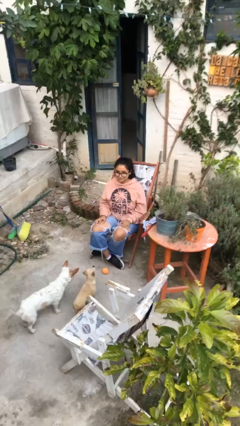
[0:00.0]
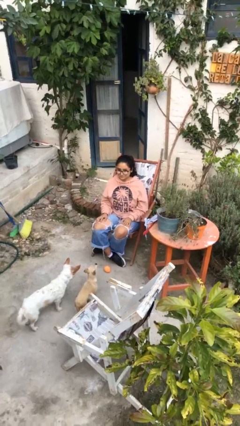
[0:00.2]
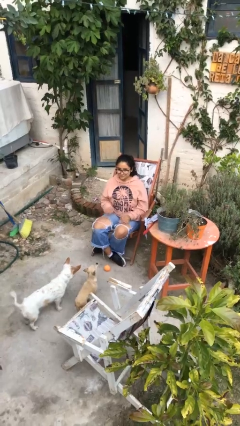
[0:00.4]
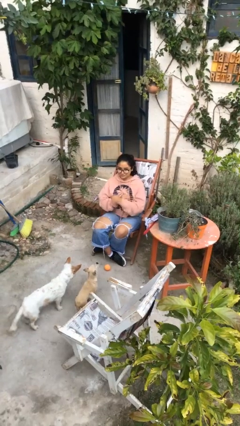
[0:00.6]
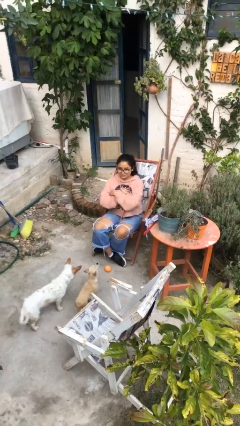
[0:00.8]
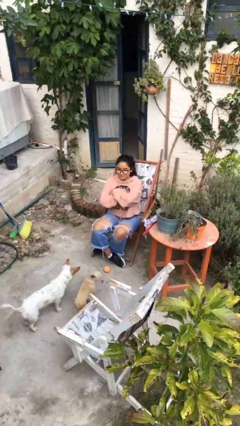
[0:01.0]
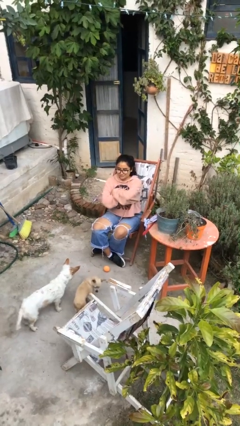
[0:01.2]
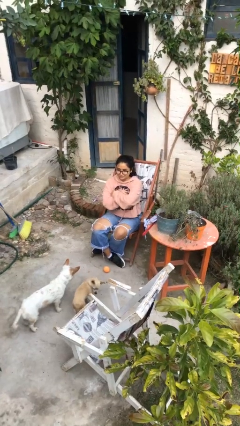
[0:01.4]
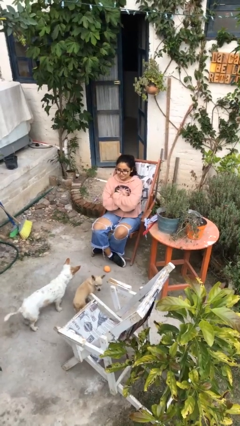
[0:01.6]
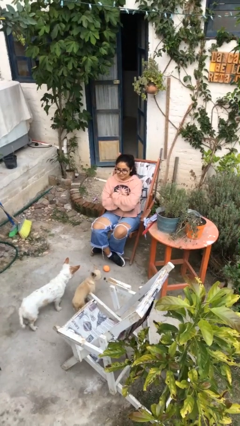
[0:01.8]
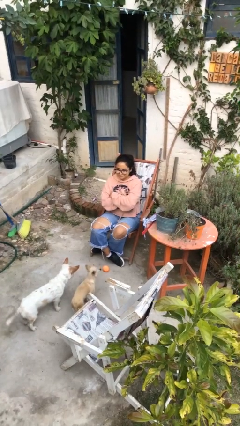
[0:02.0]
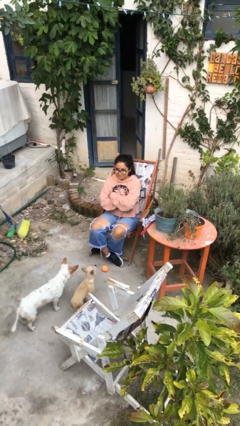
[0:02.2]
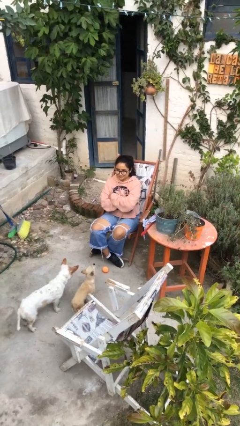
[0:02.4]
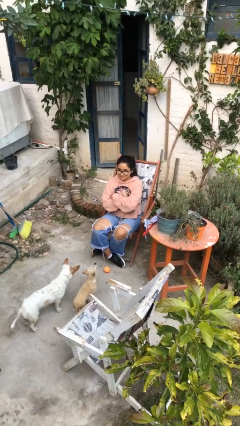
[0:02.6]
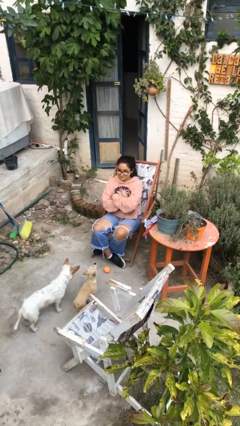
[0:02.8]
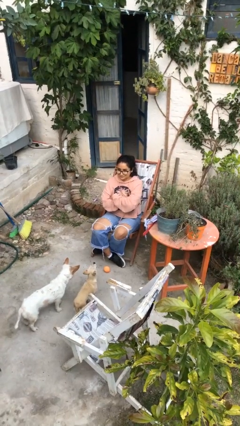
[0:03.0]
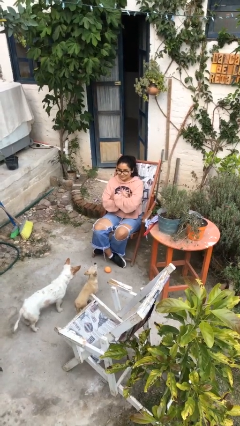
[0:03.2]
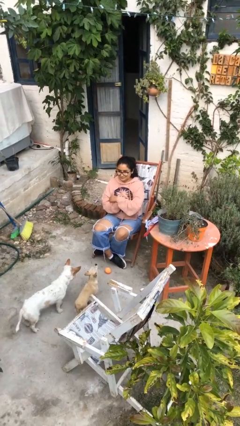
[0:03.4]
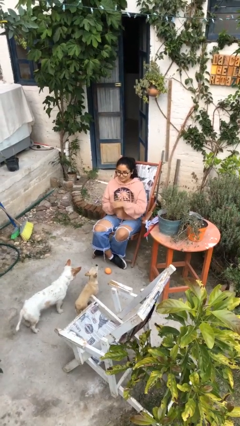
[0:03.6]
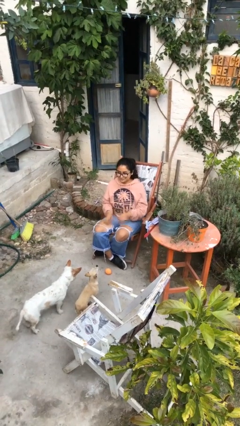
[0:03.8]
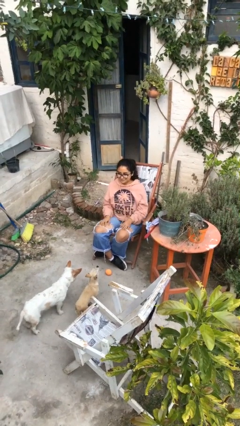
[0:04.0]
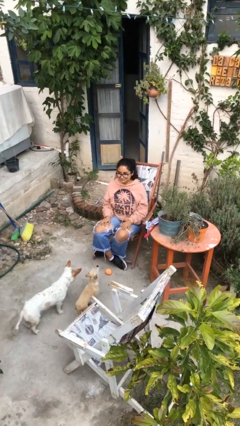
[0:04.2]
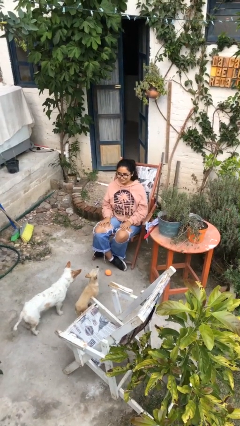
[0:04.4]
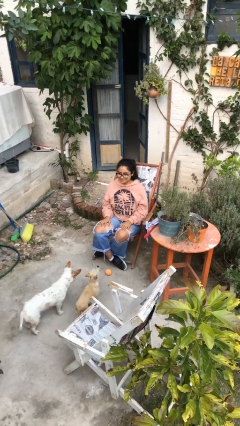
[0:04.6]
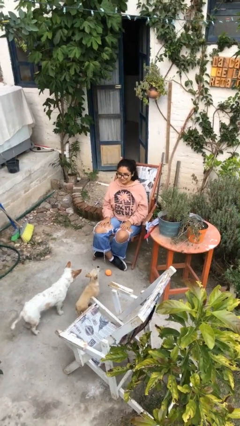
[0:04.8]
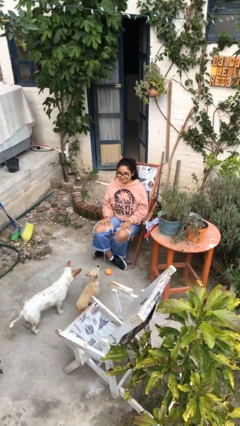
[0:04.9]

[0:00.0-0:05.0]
person crosses arms

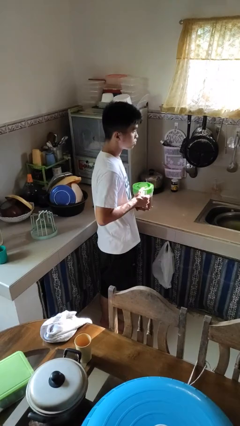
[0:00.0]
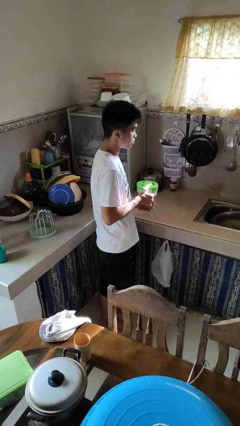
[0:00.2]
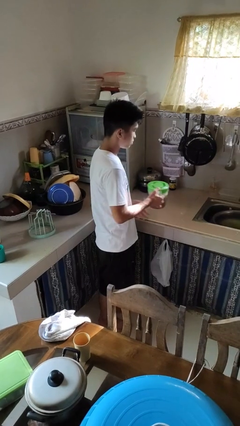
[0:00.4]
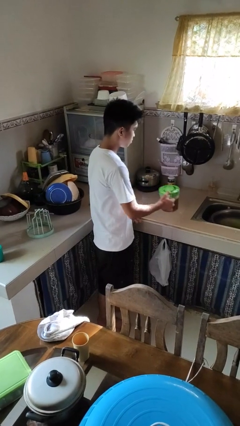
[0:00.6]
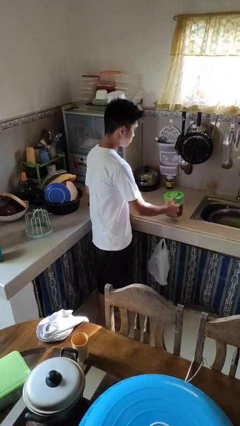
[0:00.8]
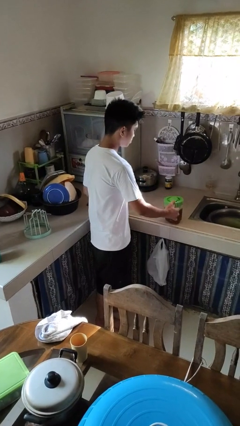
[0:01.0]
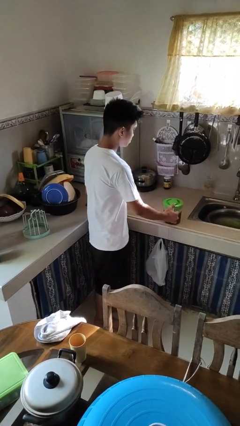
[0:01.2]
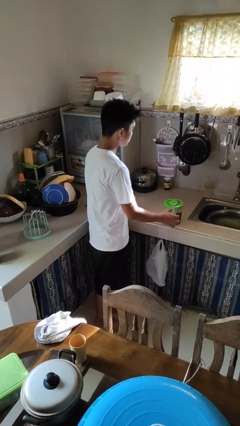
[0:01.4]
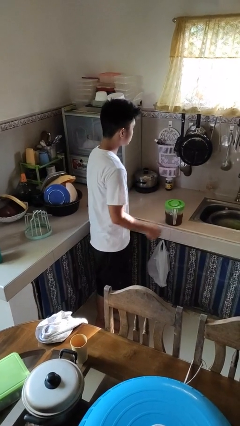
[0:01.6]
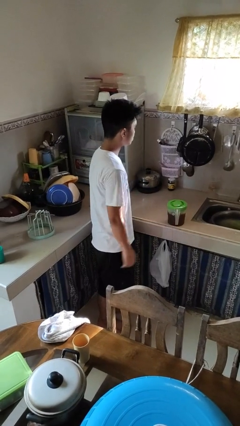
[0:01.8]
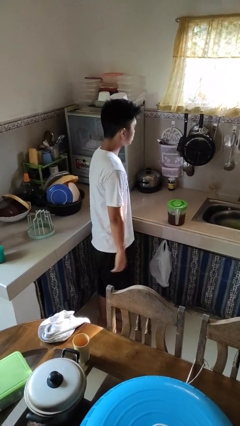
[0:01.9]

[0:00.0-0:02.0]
person puts down object on countertop

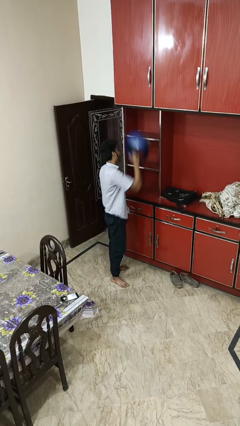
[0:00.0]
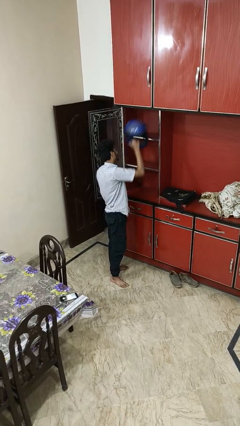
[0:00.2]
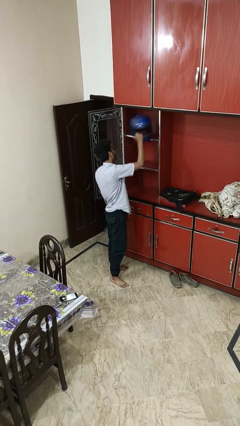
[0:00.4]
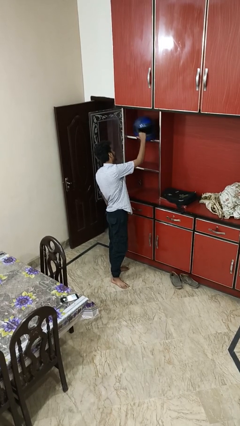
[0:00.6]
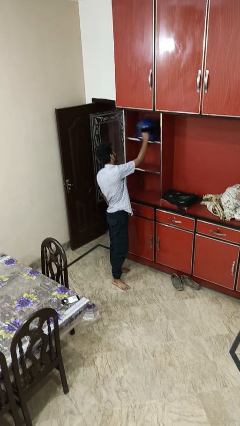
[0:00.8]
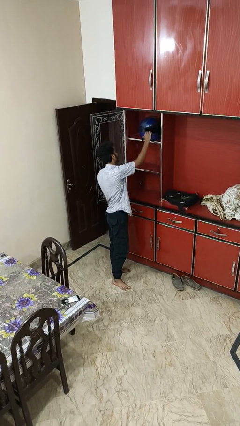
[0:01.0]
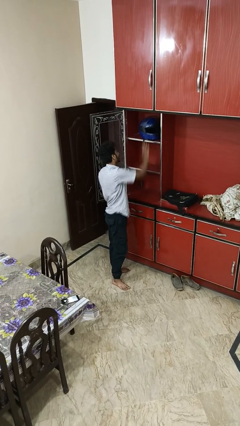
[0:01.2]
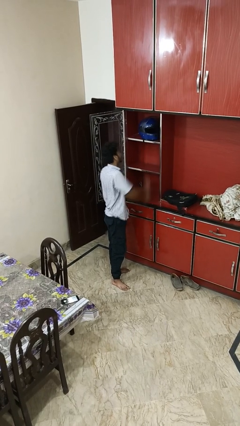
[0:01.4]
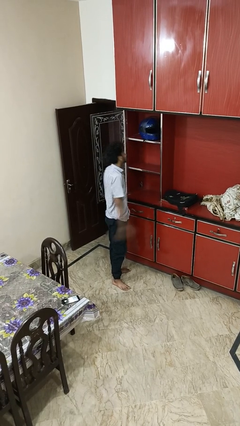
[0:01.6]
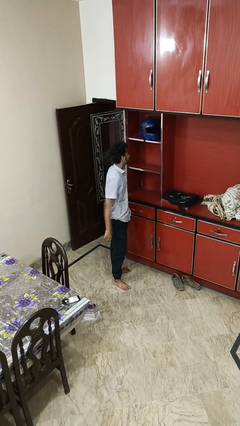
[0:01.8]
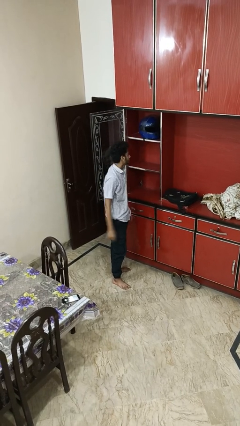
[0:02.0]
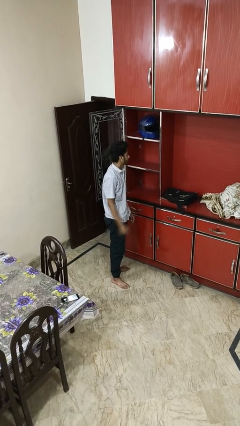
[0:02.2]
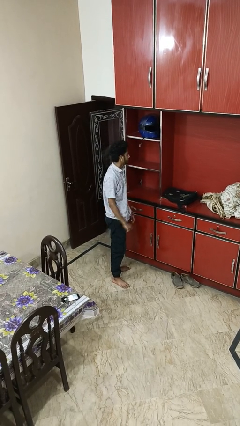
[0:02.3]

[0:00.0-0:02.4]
person puts down object on shelf

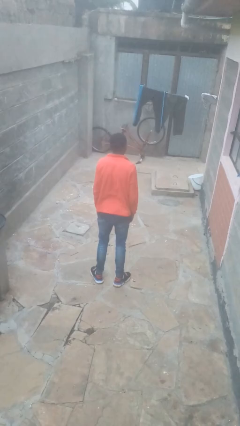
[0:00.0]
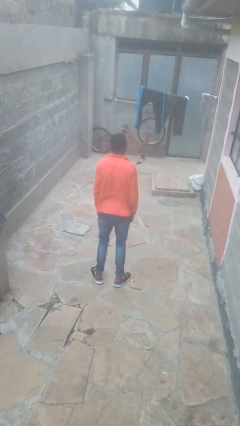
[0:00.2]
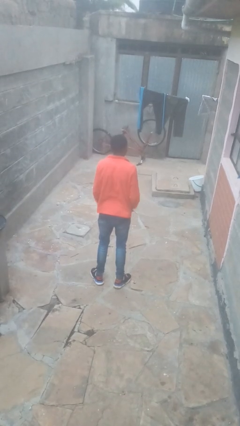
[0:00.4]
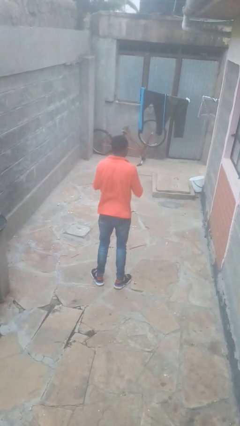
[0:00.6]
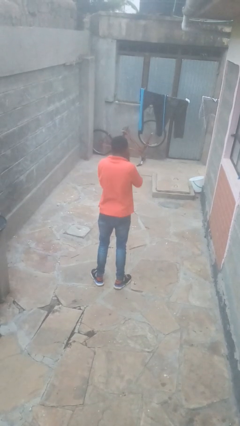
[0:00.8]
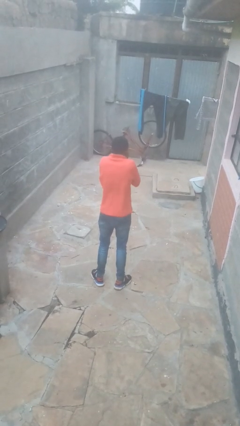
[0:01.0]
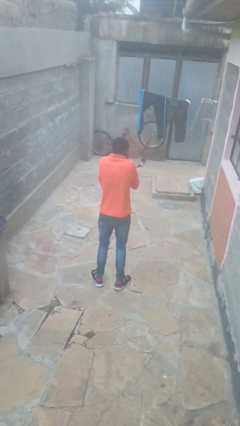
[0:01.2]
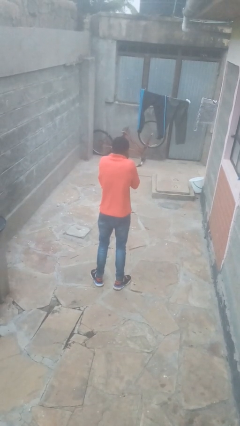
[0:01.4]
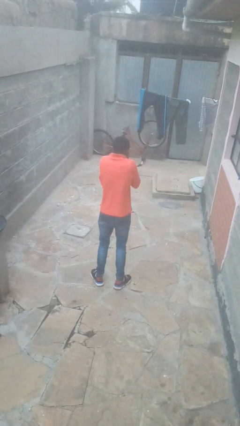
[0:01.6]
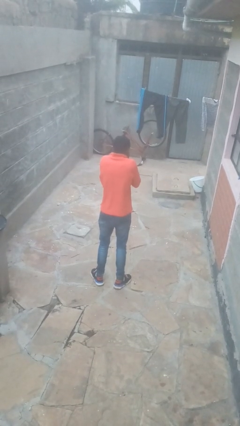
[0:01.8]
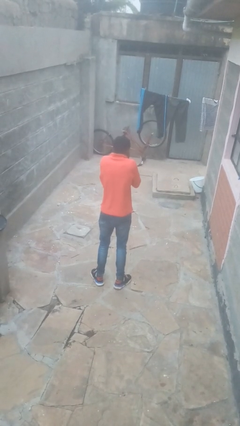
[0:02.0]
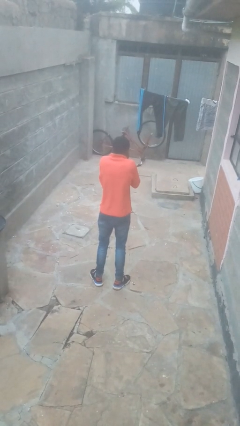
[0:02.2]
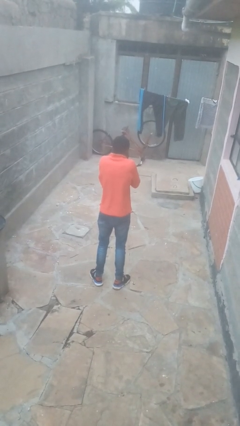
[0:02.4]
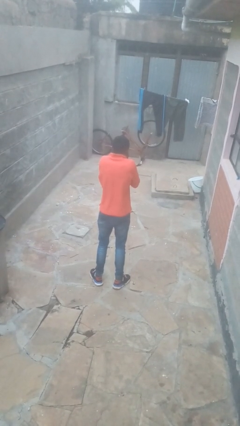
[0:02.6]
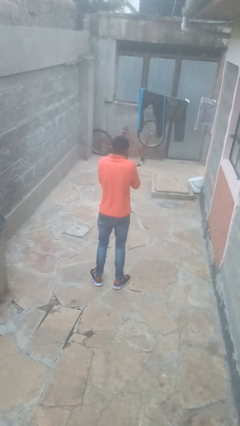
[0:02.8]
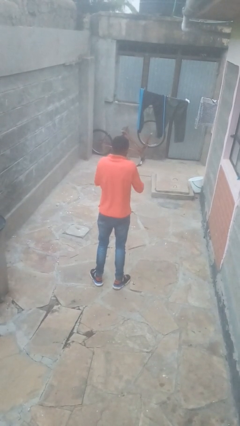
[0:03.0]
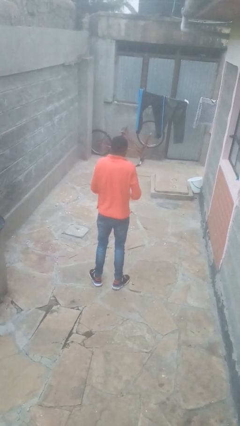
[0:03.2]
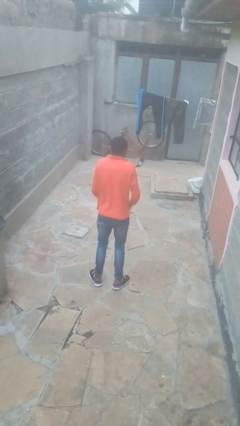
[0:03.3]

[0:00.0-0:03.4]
person covers face with hands

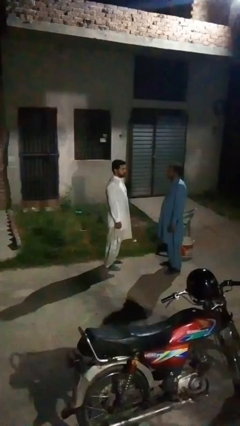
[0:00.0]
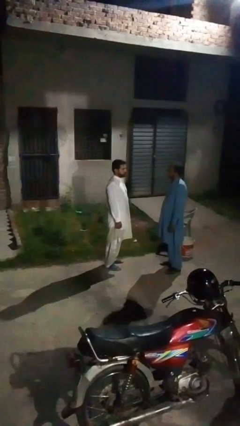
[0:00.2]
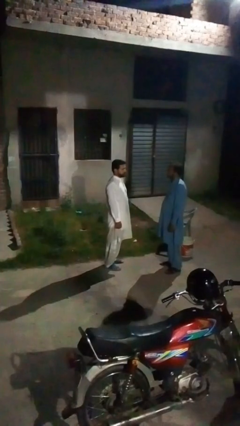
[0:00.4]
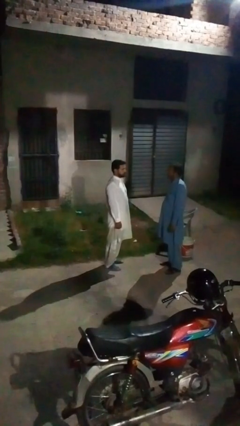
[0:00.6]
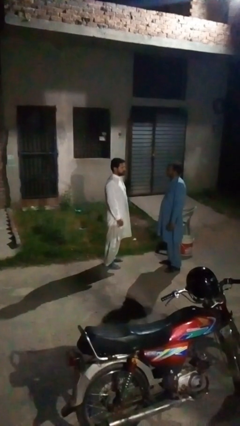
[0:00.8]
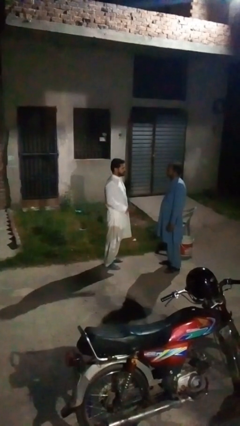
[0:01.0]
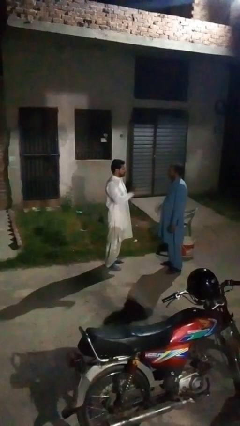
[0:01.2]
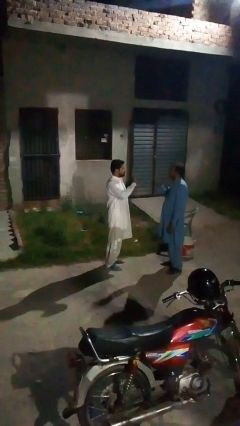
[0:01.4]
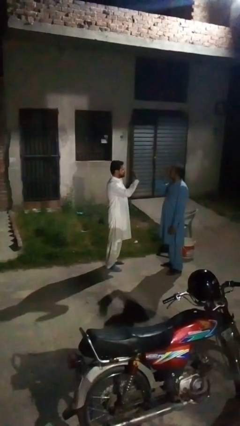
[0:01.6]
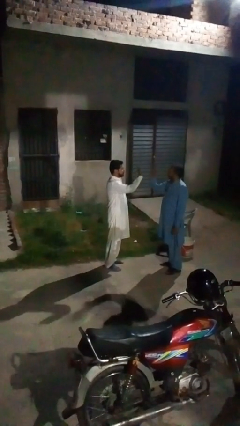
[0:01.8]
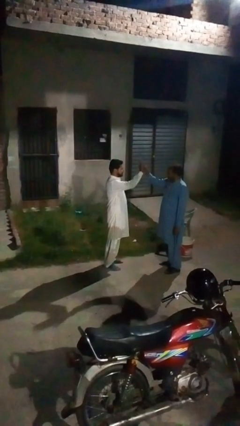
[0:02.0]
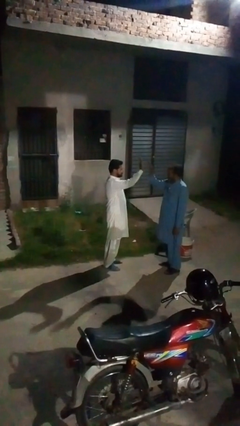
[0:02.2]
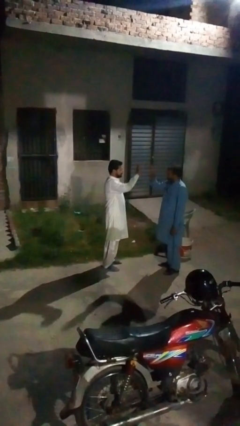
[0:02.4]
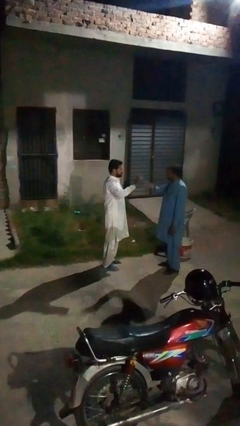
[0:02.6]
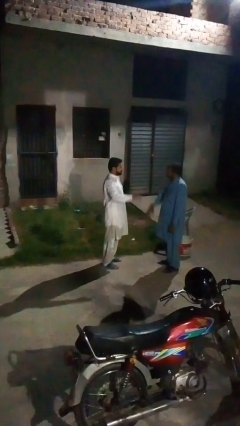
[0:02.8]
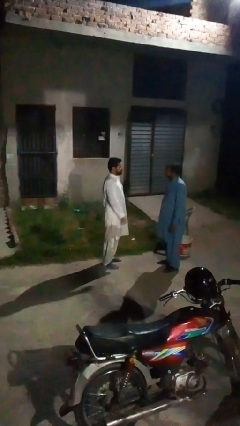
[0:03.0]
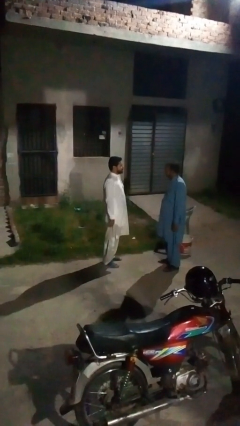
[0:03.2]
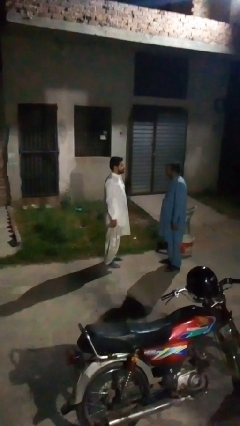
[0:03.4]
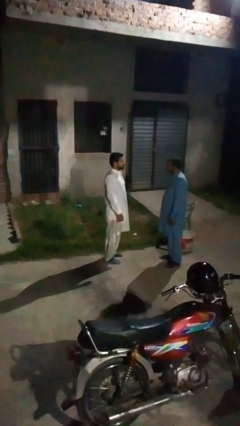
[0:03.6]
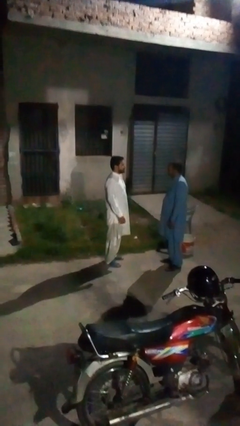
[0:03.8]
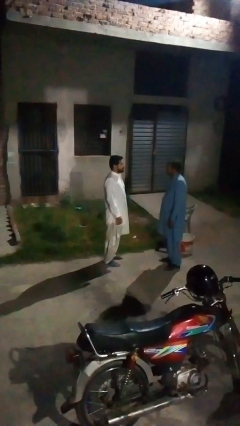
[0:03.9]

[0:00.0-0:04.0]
person highfives hand

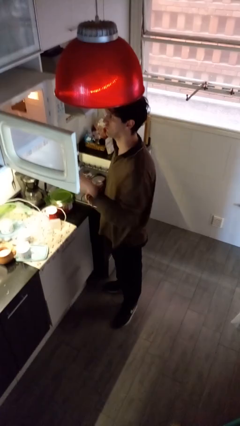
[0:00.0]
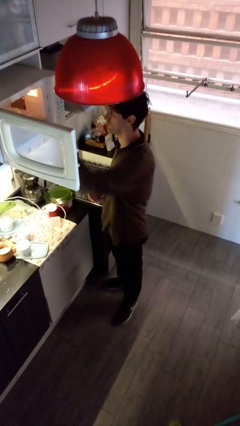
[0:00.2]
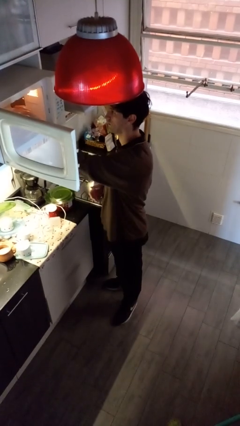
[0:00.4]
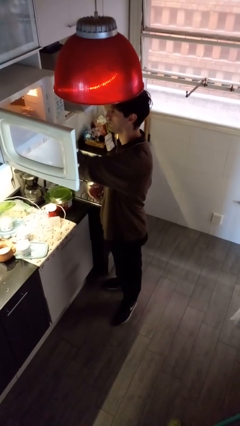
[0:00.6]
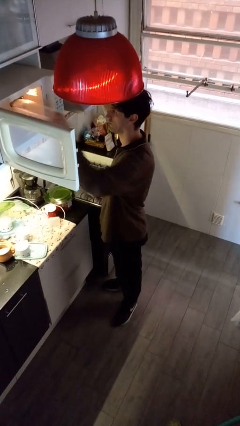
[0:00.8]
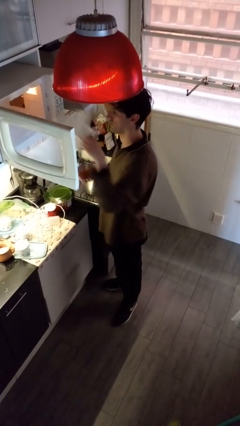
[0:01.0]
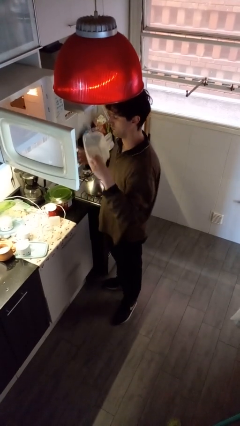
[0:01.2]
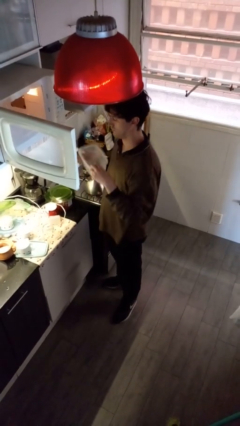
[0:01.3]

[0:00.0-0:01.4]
person takes object from microwave
